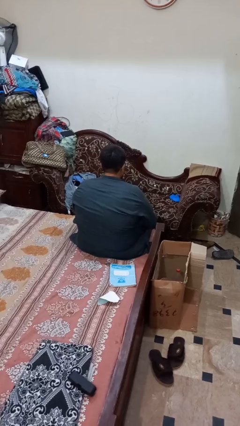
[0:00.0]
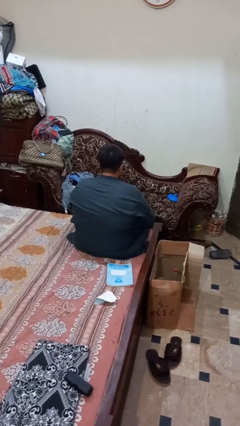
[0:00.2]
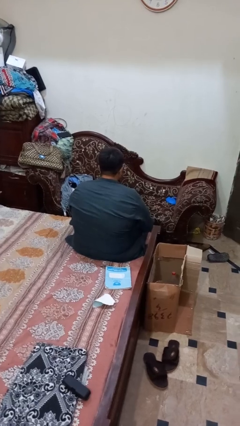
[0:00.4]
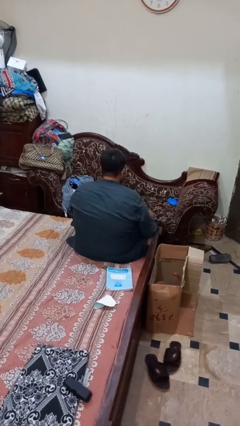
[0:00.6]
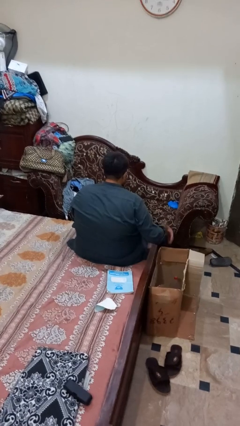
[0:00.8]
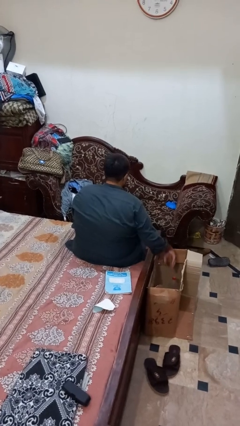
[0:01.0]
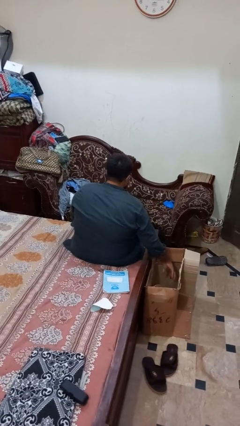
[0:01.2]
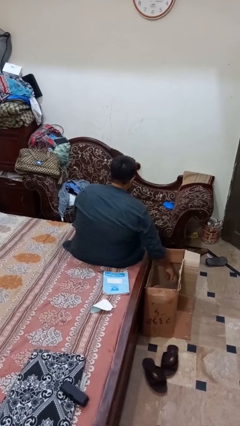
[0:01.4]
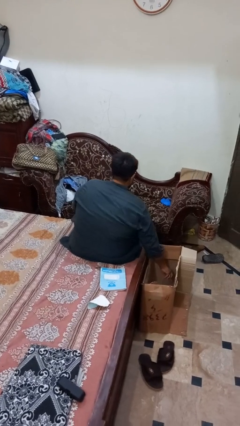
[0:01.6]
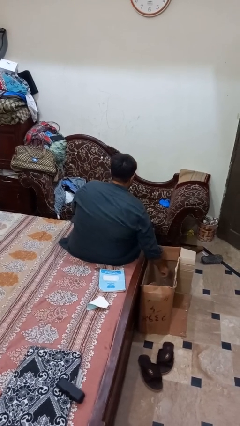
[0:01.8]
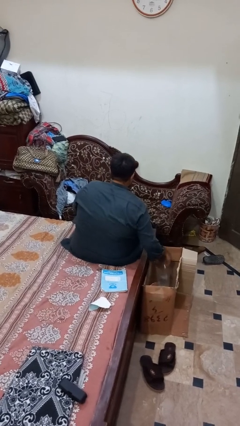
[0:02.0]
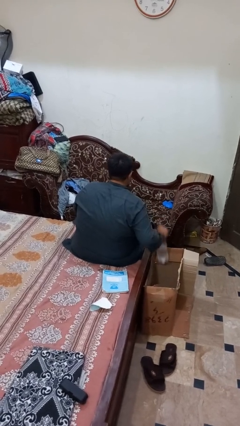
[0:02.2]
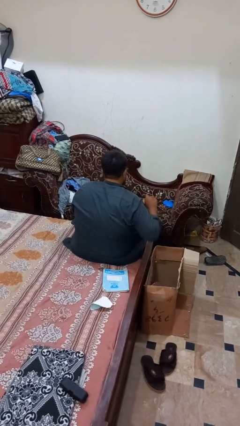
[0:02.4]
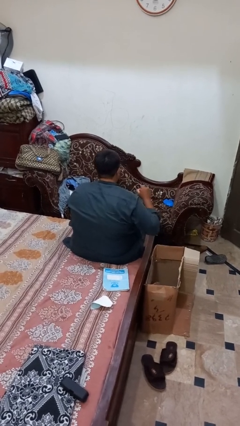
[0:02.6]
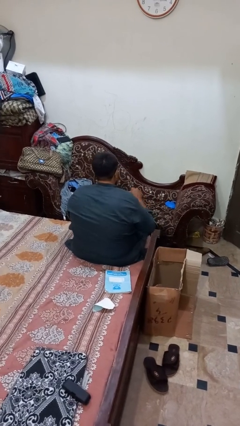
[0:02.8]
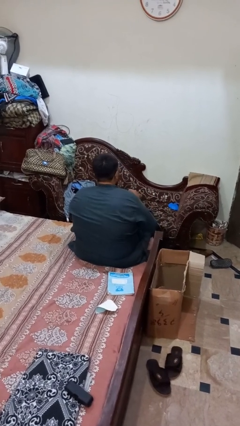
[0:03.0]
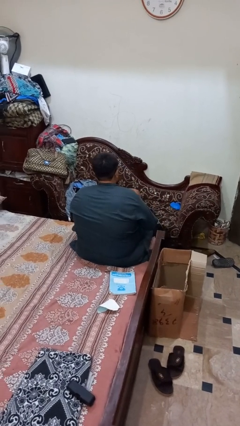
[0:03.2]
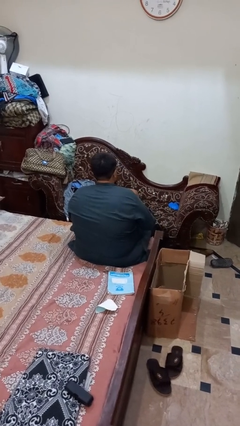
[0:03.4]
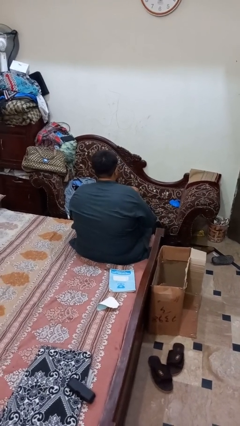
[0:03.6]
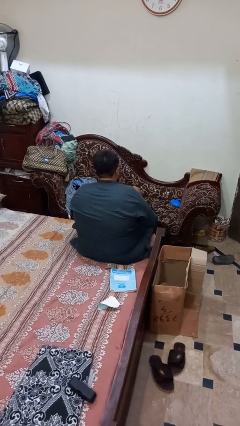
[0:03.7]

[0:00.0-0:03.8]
person takes object from box

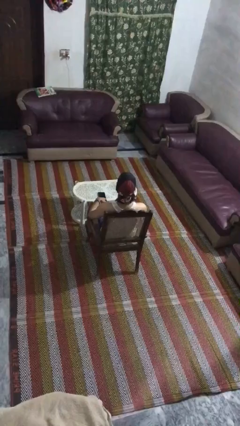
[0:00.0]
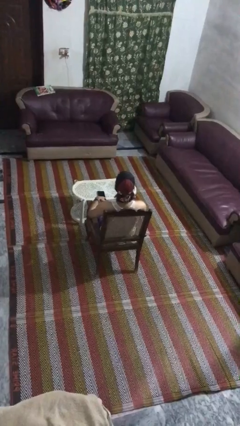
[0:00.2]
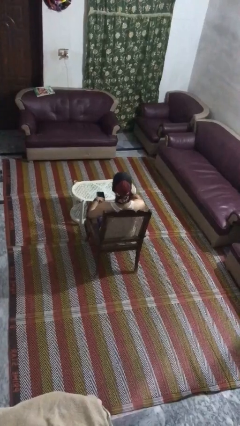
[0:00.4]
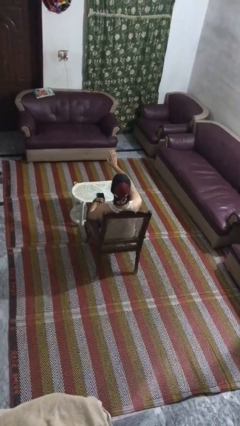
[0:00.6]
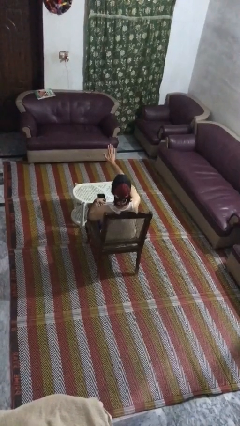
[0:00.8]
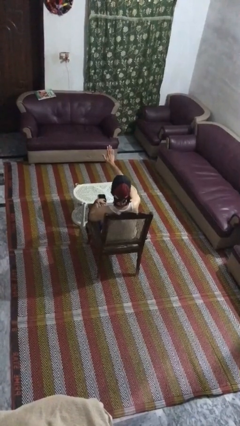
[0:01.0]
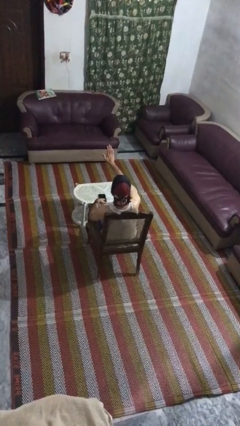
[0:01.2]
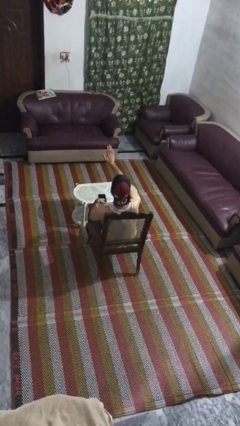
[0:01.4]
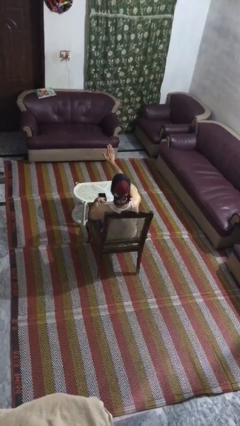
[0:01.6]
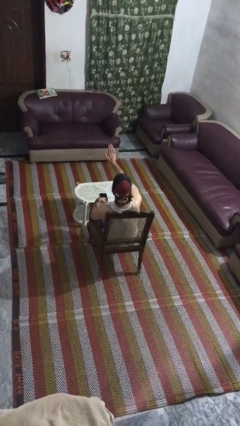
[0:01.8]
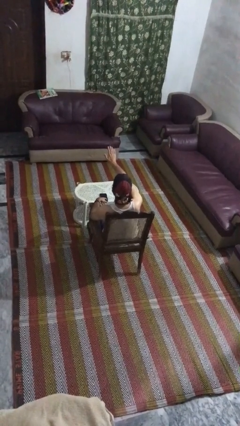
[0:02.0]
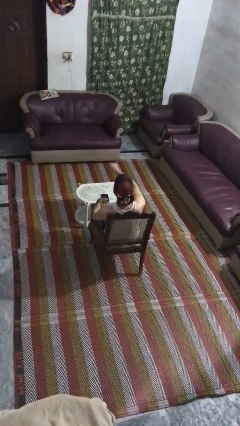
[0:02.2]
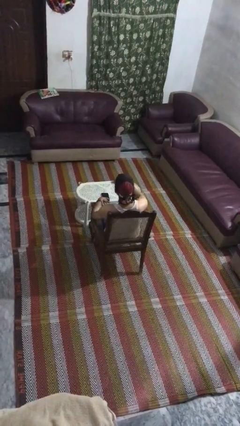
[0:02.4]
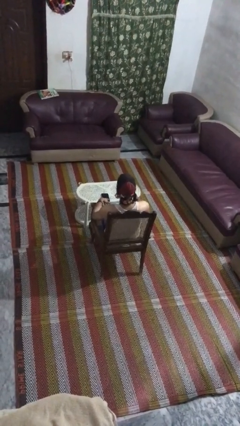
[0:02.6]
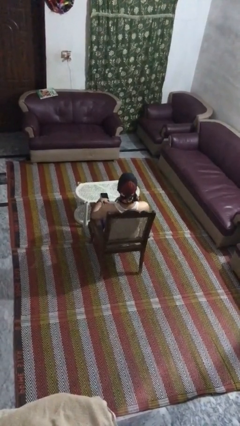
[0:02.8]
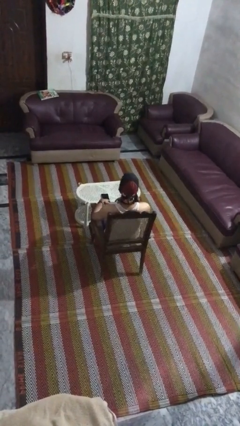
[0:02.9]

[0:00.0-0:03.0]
person gestures stop

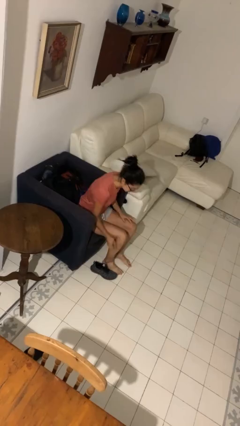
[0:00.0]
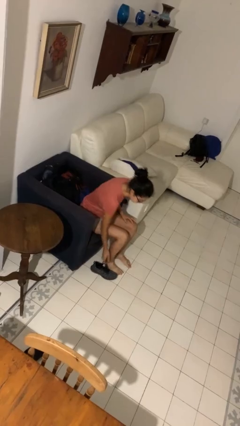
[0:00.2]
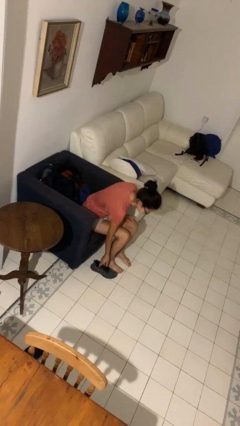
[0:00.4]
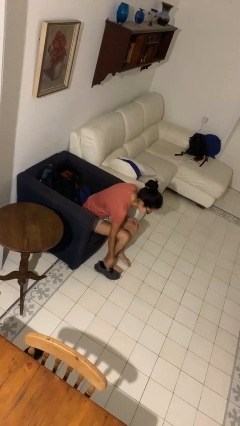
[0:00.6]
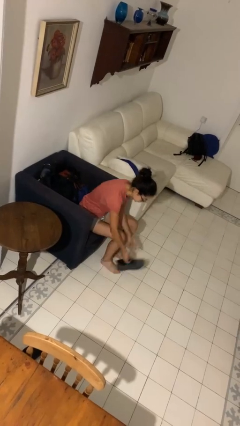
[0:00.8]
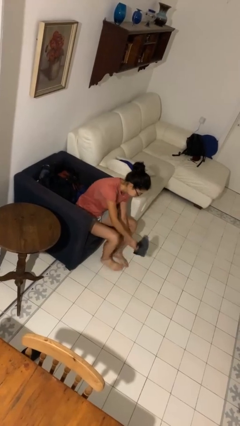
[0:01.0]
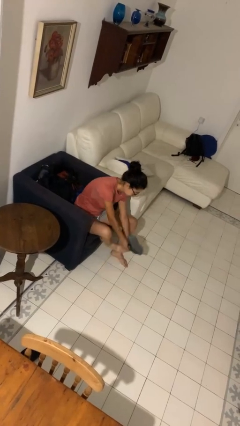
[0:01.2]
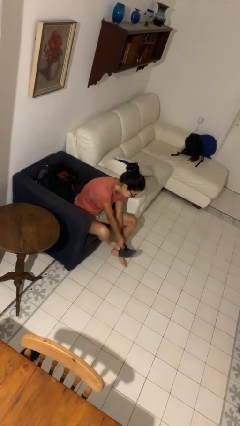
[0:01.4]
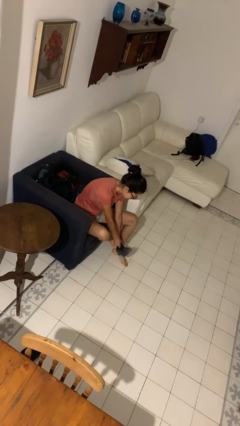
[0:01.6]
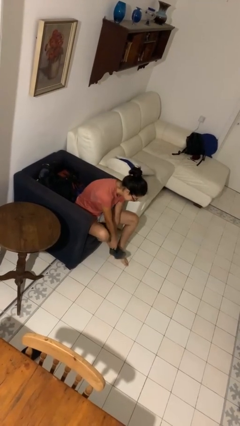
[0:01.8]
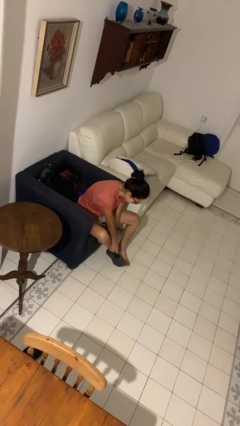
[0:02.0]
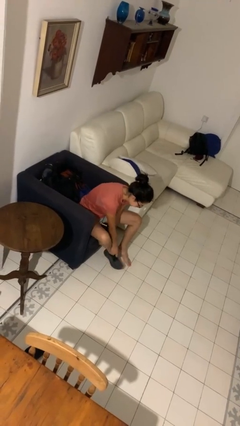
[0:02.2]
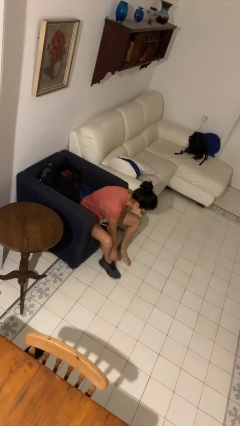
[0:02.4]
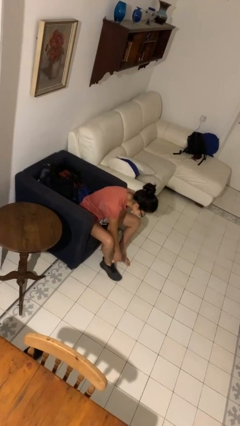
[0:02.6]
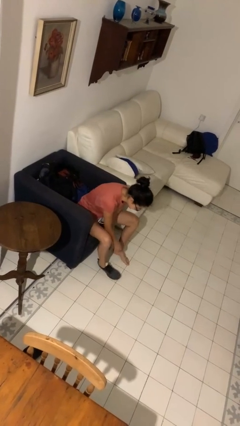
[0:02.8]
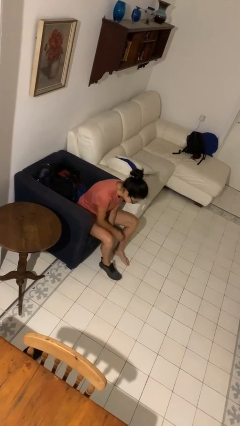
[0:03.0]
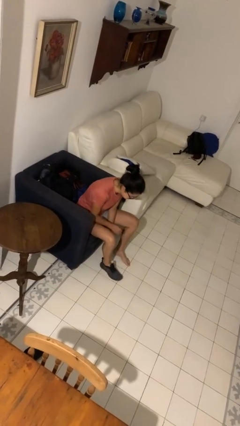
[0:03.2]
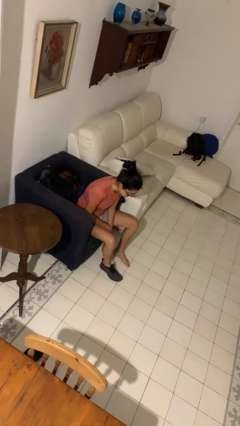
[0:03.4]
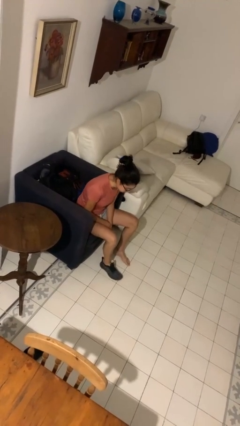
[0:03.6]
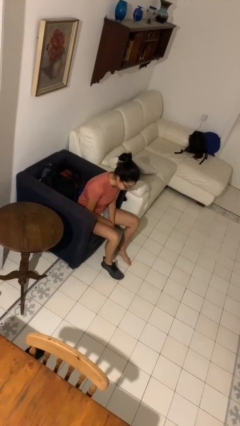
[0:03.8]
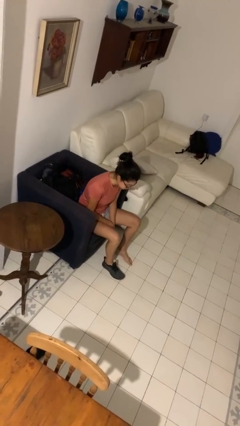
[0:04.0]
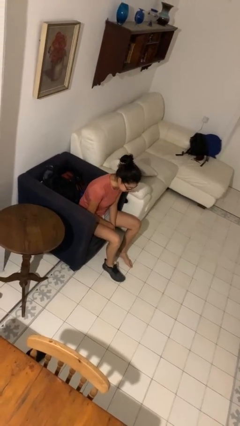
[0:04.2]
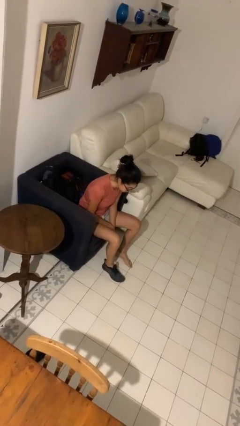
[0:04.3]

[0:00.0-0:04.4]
person puts on shoes

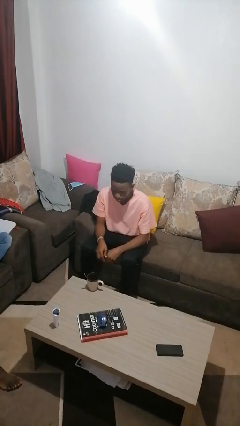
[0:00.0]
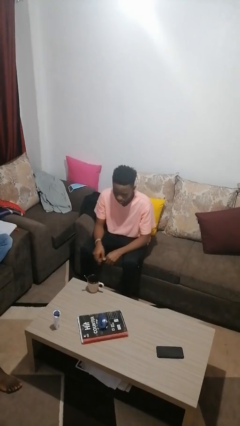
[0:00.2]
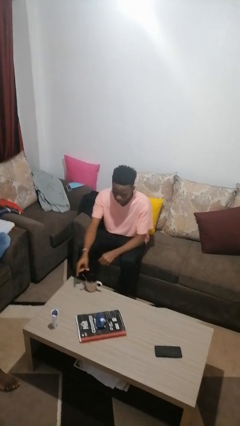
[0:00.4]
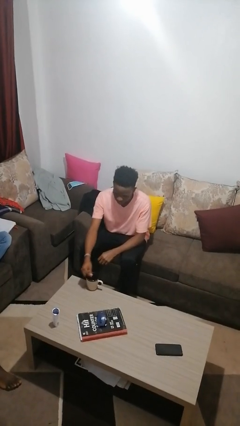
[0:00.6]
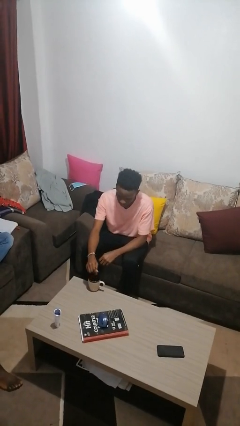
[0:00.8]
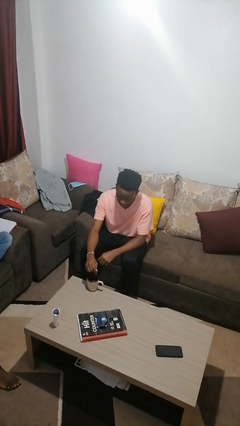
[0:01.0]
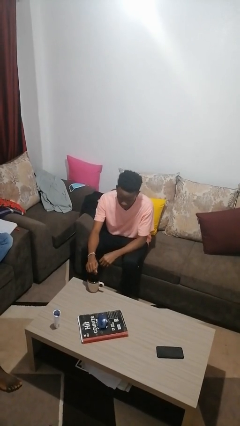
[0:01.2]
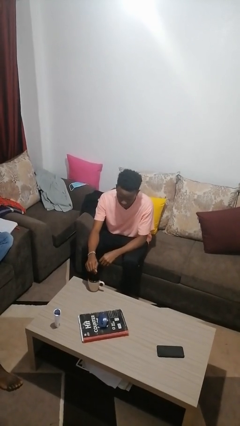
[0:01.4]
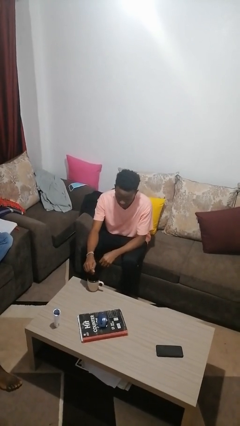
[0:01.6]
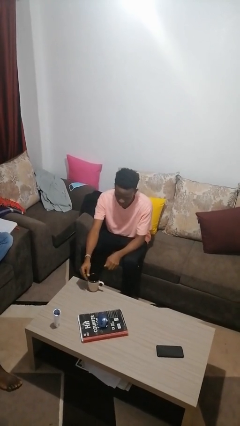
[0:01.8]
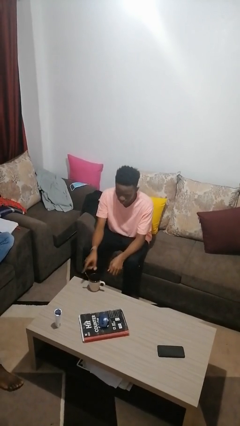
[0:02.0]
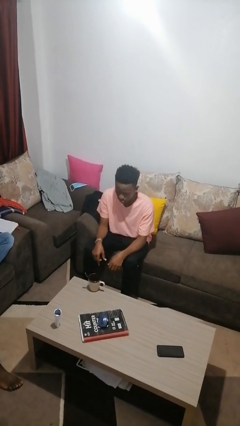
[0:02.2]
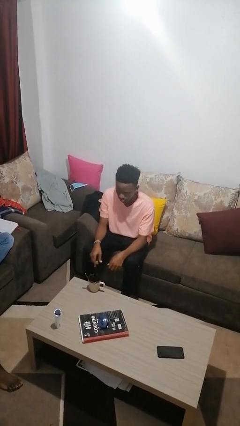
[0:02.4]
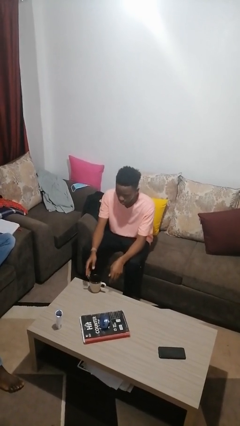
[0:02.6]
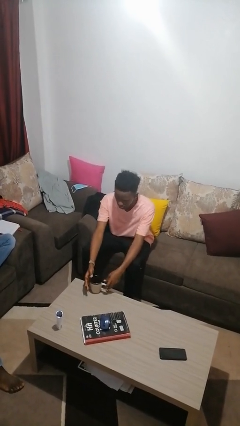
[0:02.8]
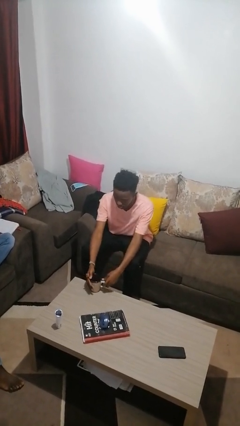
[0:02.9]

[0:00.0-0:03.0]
person stirs mug

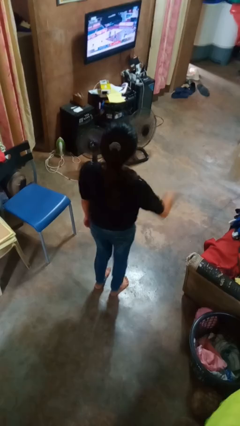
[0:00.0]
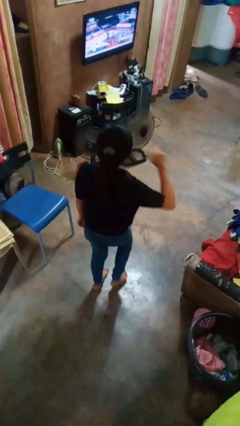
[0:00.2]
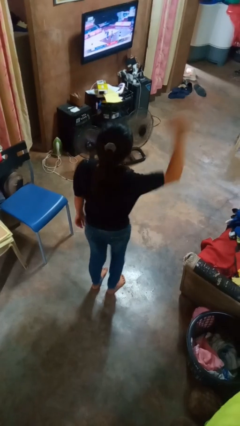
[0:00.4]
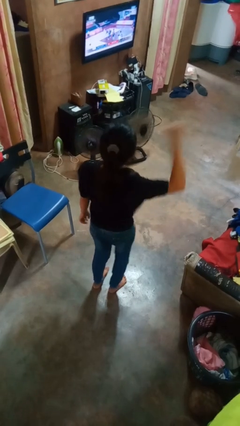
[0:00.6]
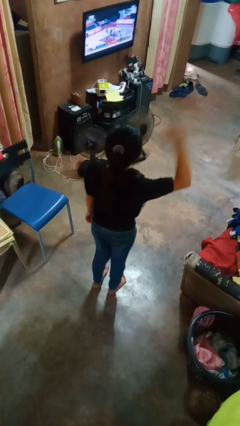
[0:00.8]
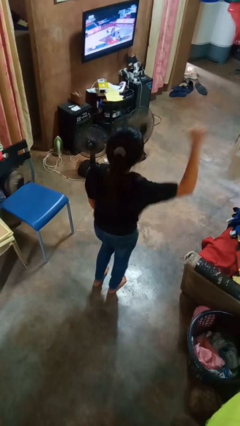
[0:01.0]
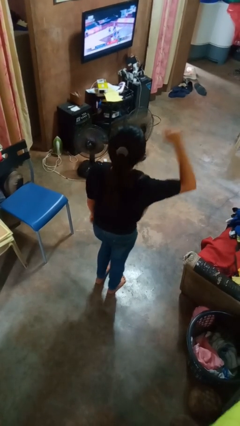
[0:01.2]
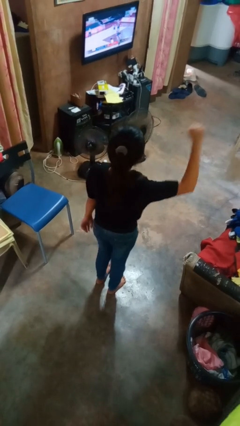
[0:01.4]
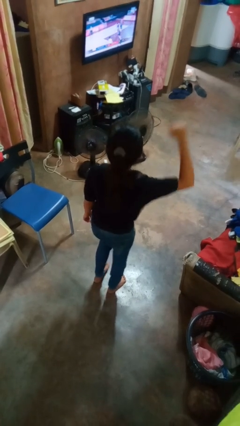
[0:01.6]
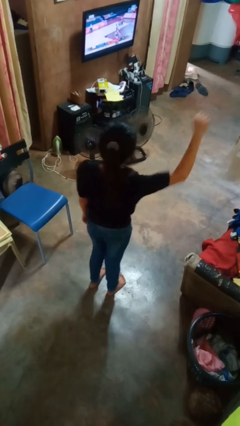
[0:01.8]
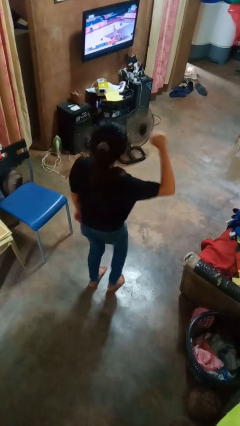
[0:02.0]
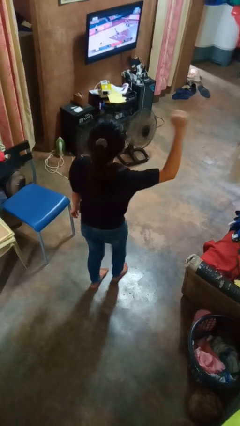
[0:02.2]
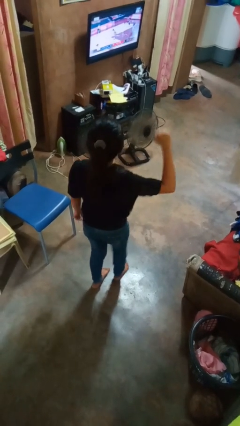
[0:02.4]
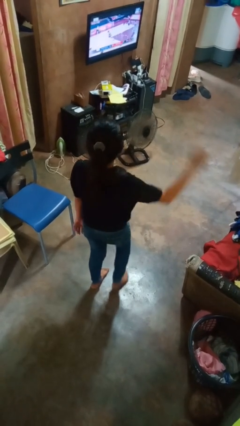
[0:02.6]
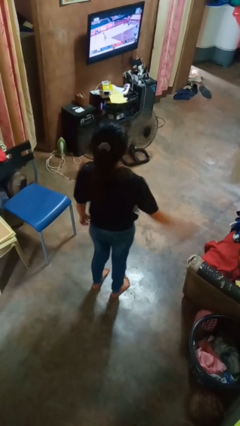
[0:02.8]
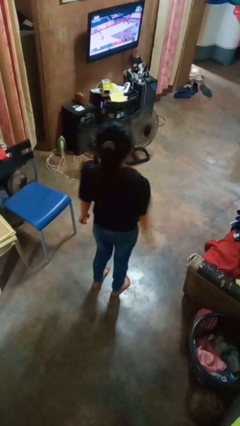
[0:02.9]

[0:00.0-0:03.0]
person dances in place
